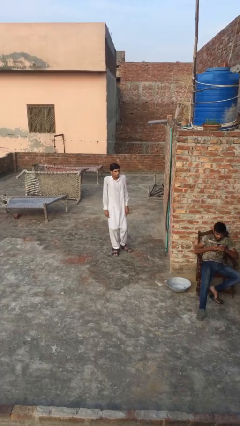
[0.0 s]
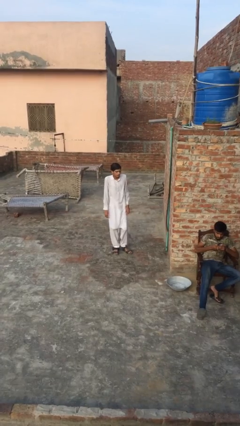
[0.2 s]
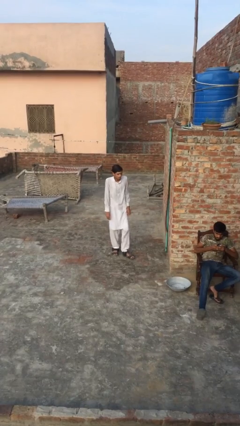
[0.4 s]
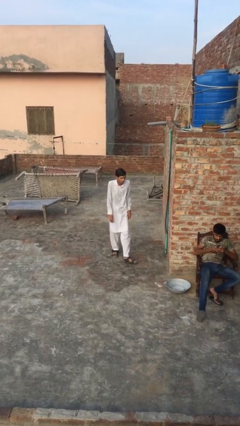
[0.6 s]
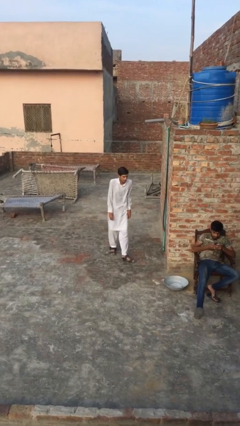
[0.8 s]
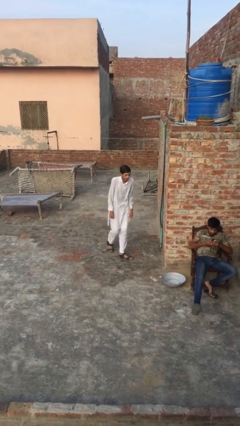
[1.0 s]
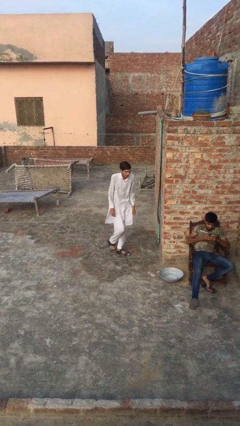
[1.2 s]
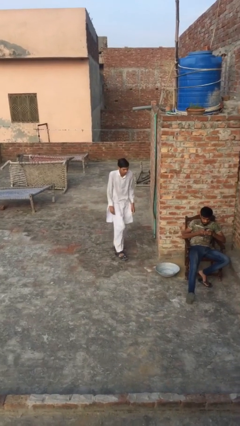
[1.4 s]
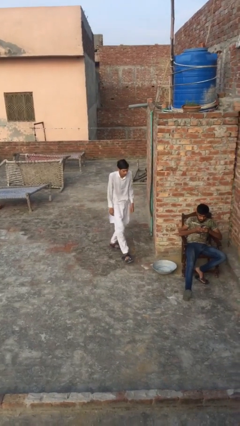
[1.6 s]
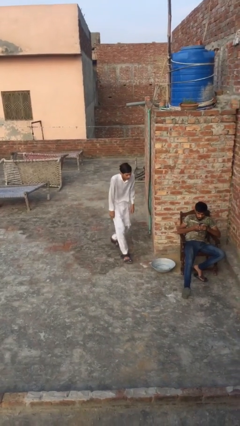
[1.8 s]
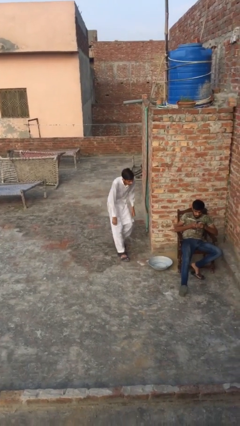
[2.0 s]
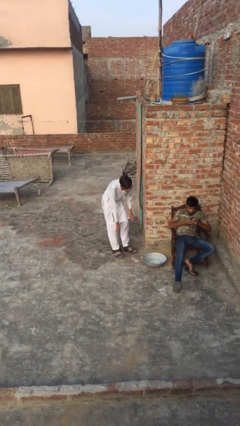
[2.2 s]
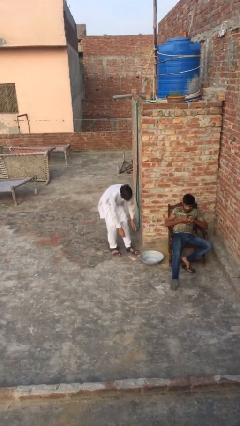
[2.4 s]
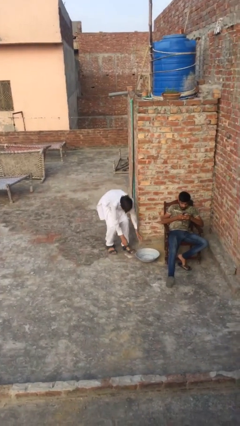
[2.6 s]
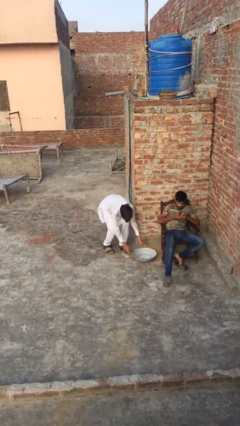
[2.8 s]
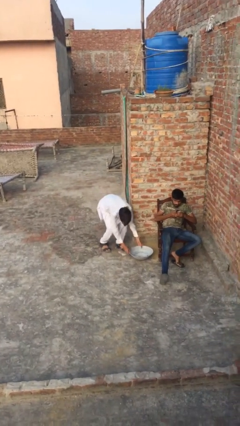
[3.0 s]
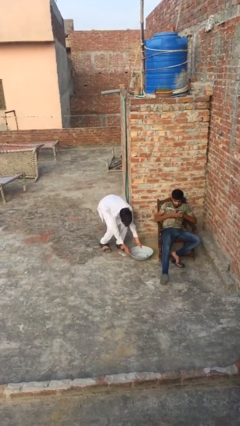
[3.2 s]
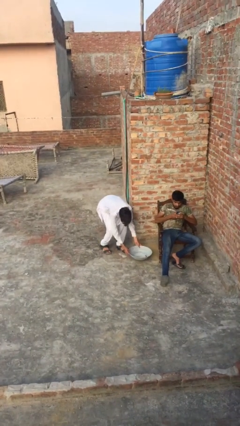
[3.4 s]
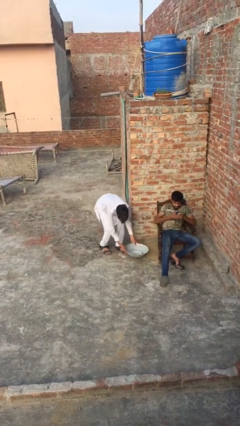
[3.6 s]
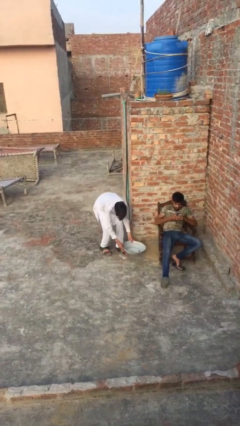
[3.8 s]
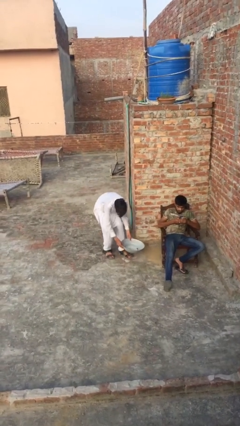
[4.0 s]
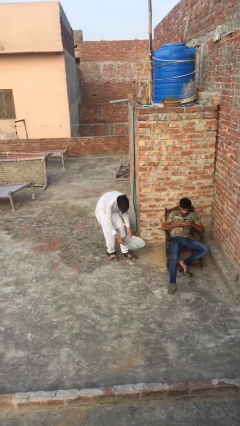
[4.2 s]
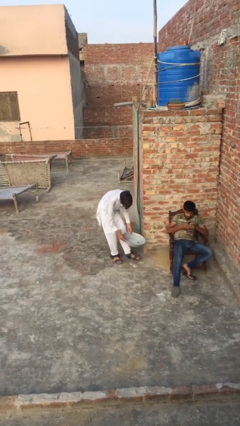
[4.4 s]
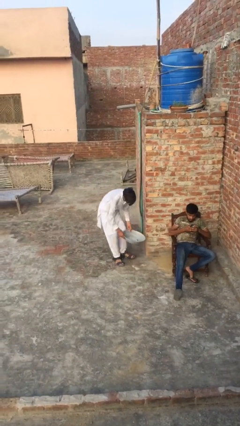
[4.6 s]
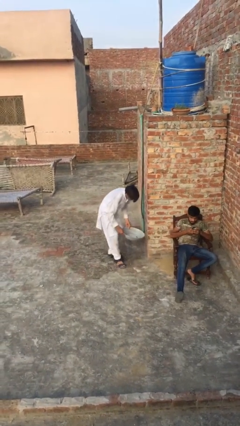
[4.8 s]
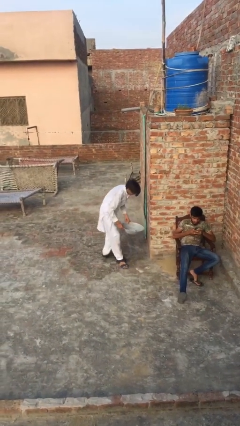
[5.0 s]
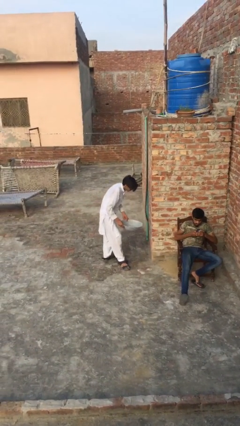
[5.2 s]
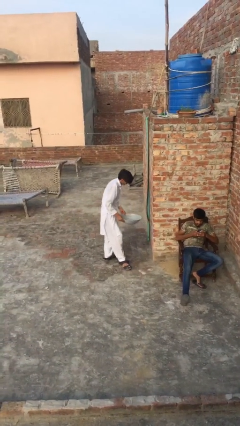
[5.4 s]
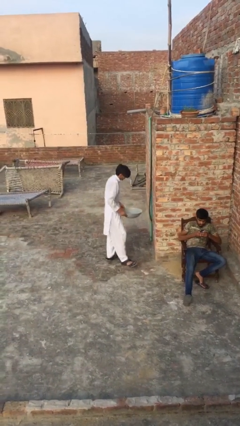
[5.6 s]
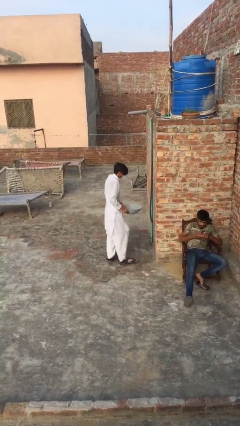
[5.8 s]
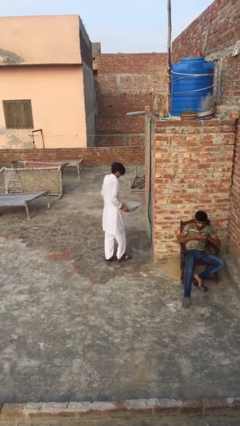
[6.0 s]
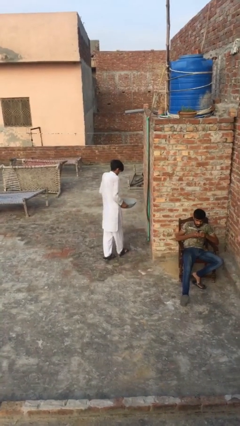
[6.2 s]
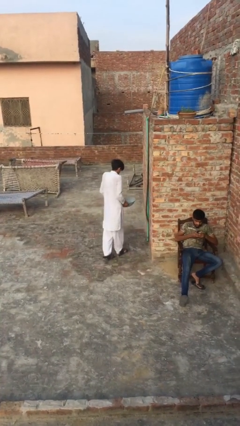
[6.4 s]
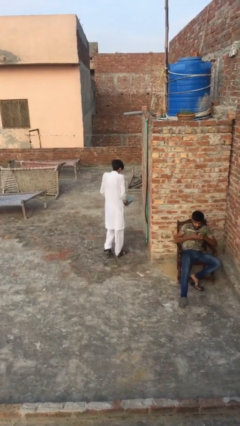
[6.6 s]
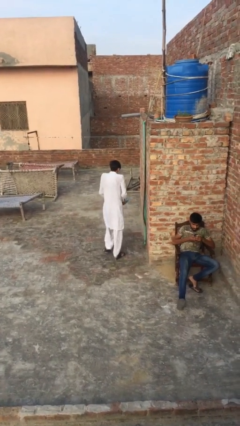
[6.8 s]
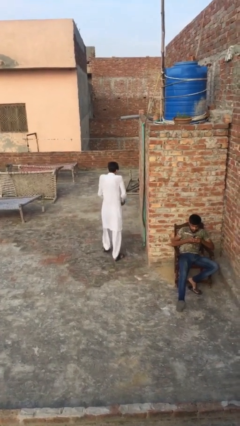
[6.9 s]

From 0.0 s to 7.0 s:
person steals object from person

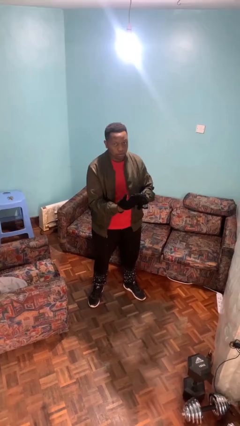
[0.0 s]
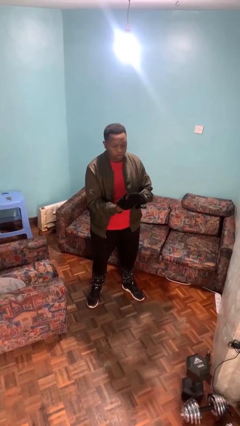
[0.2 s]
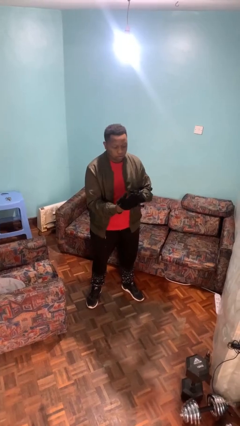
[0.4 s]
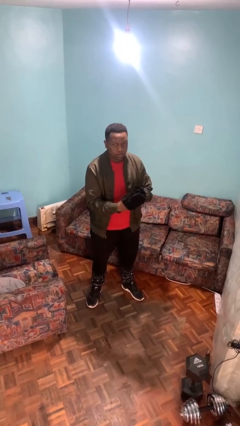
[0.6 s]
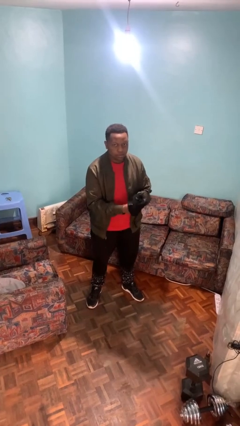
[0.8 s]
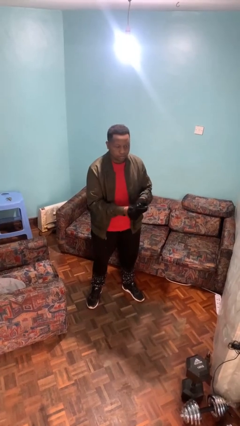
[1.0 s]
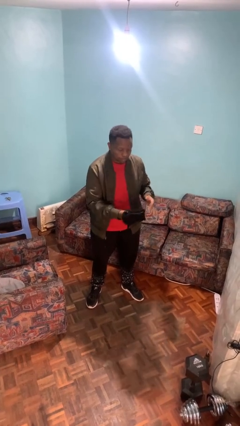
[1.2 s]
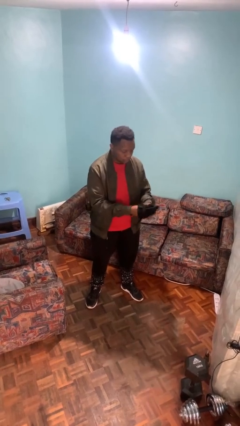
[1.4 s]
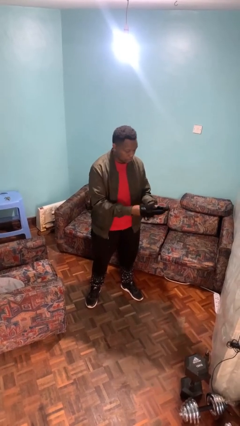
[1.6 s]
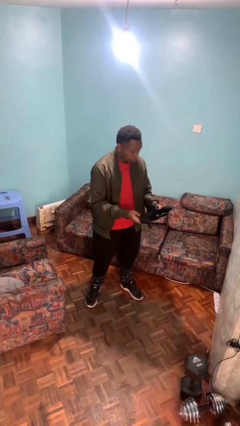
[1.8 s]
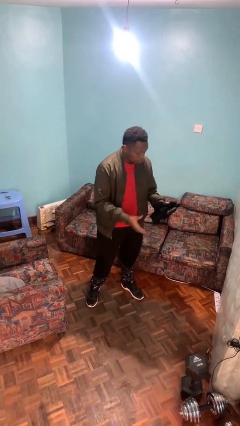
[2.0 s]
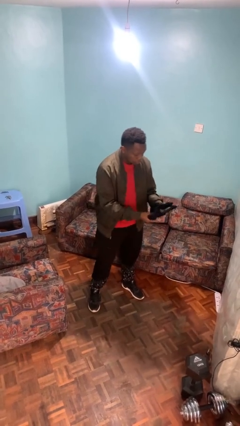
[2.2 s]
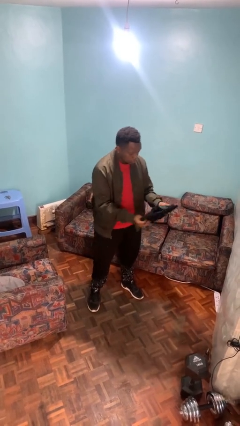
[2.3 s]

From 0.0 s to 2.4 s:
person takes off gloves

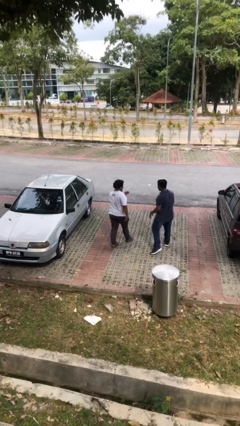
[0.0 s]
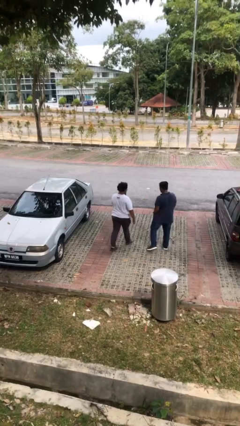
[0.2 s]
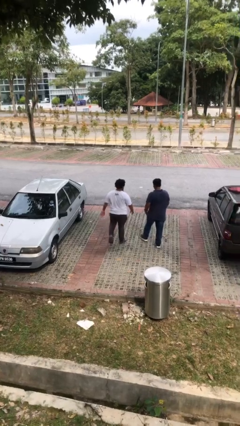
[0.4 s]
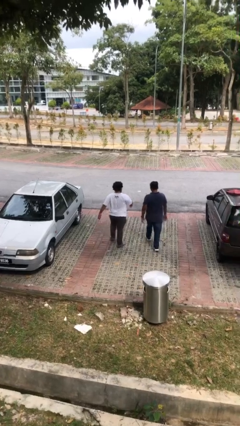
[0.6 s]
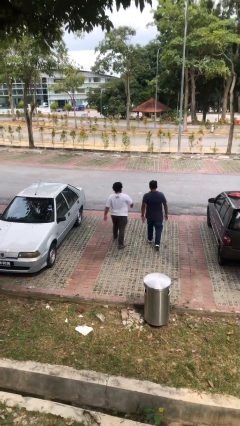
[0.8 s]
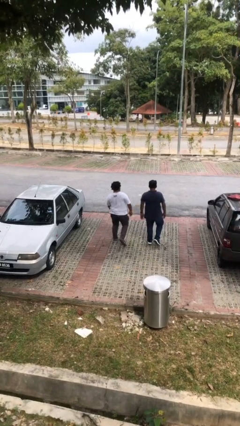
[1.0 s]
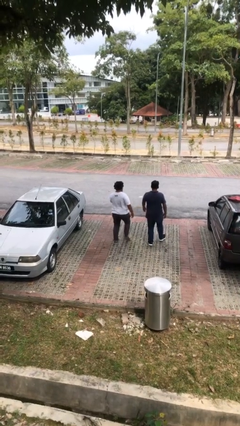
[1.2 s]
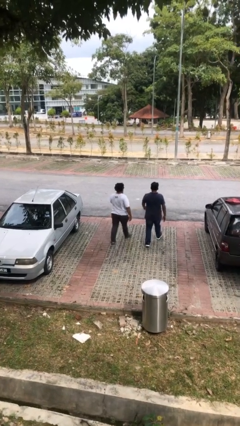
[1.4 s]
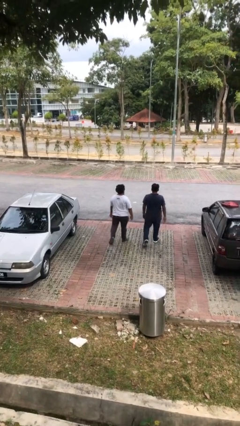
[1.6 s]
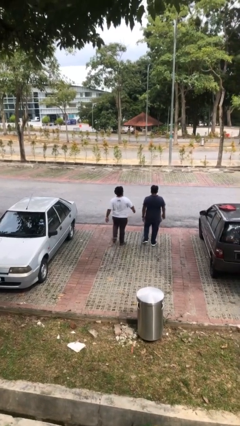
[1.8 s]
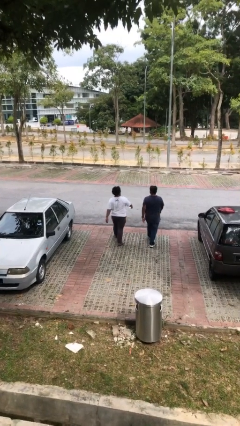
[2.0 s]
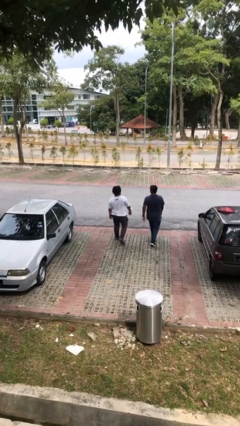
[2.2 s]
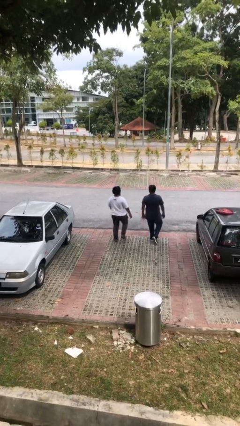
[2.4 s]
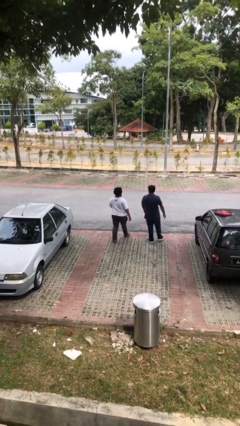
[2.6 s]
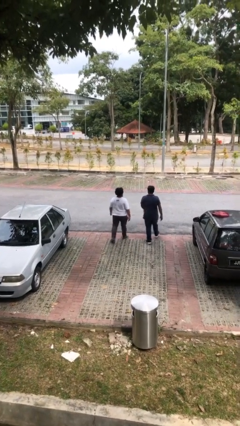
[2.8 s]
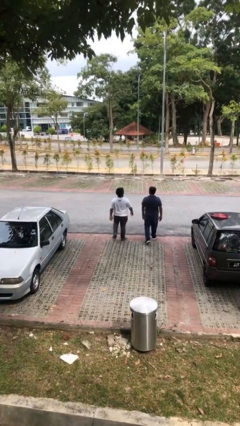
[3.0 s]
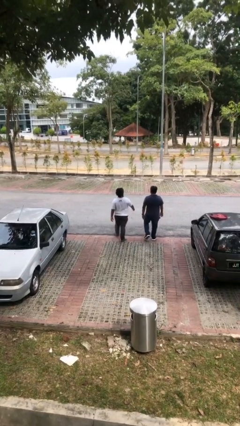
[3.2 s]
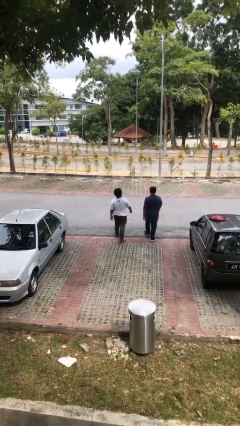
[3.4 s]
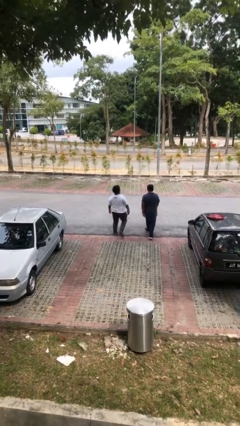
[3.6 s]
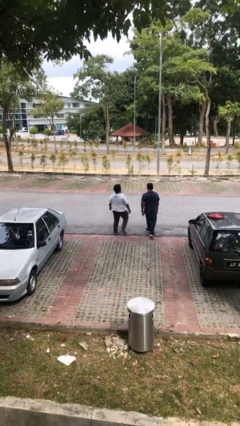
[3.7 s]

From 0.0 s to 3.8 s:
person talks to person

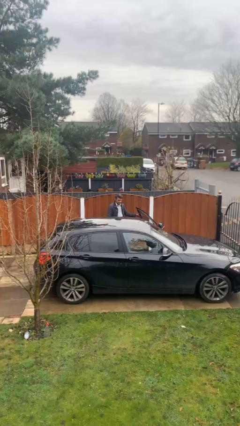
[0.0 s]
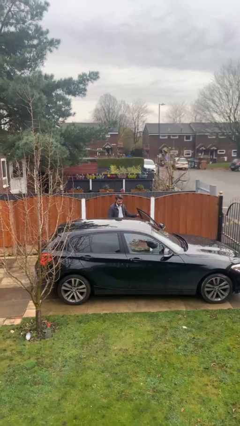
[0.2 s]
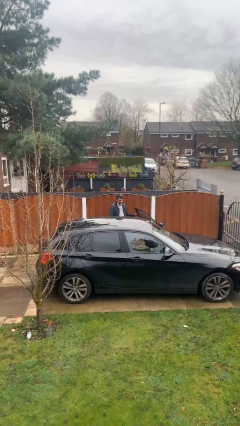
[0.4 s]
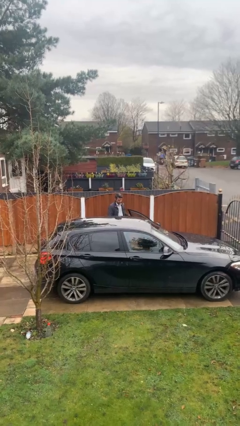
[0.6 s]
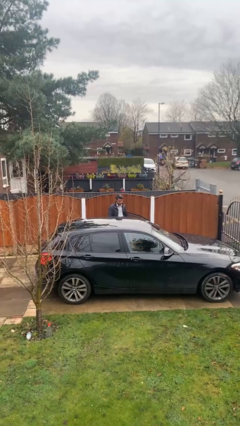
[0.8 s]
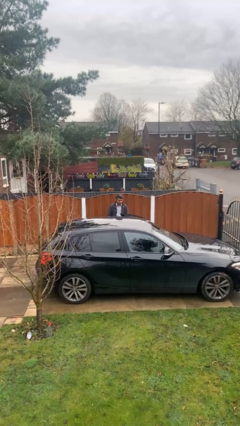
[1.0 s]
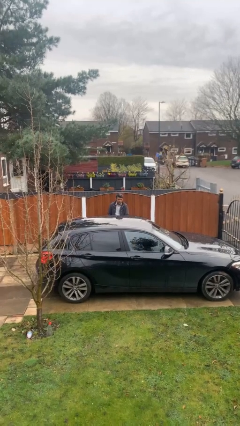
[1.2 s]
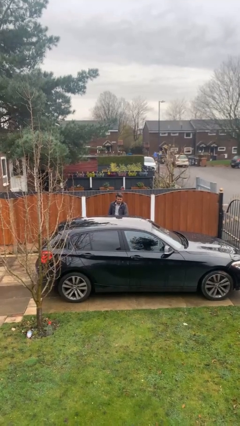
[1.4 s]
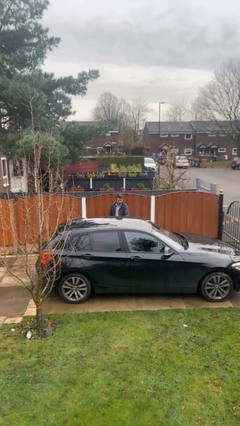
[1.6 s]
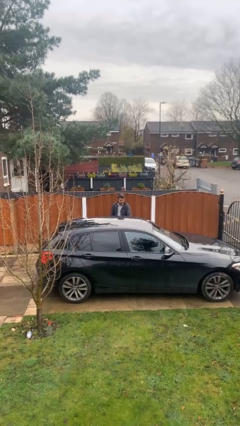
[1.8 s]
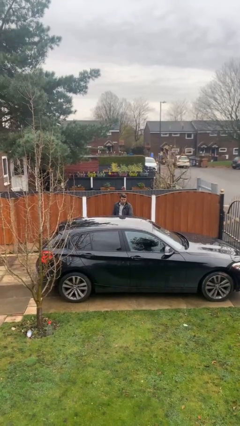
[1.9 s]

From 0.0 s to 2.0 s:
person closes car door

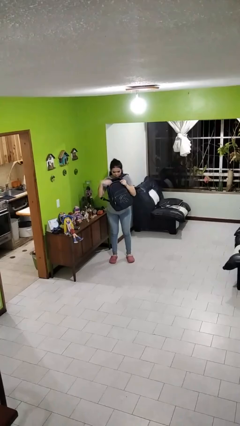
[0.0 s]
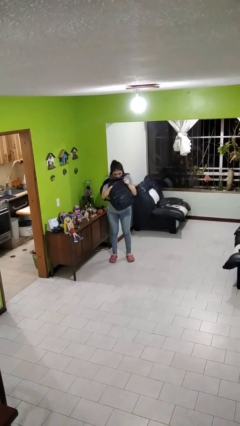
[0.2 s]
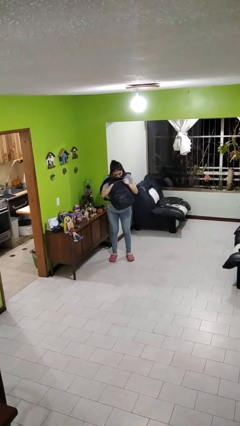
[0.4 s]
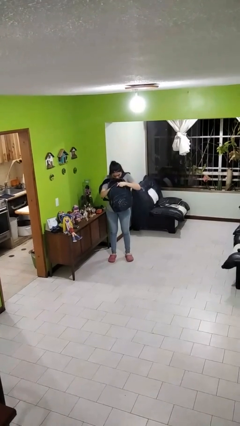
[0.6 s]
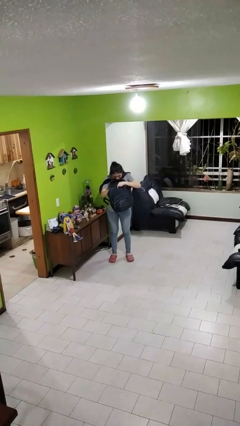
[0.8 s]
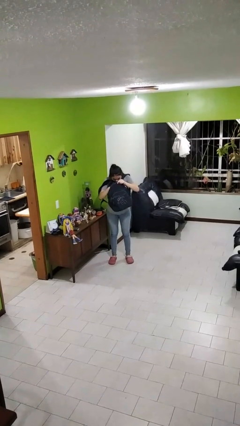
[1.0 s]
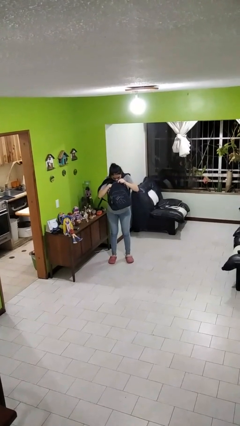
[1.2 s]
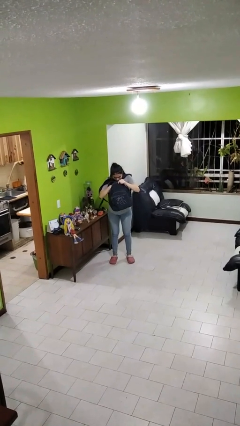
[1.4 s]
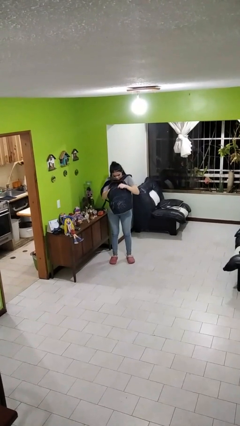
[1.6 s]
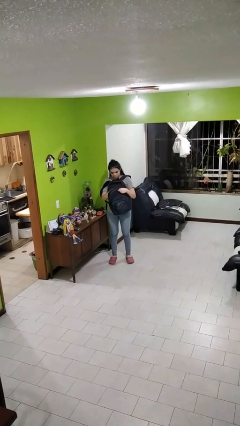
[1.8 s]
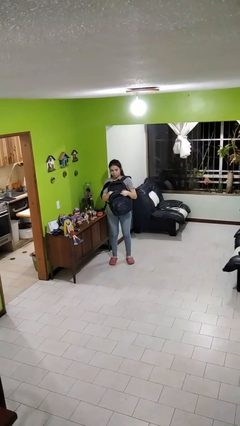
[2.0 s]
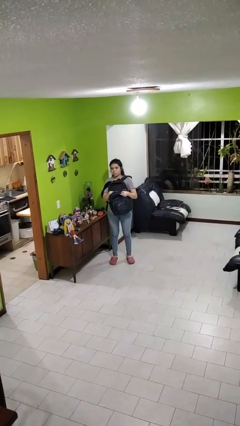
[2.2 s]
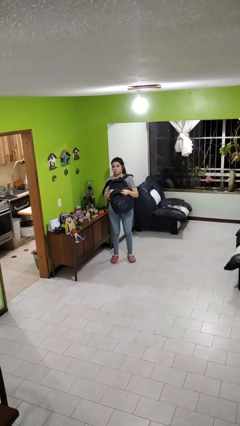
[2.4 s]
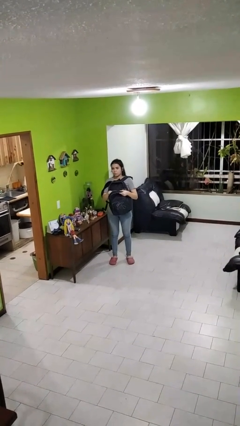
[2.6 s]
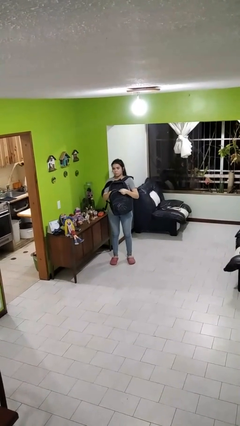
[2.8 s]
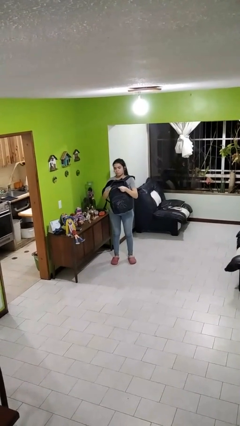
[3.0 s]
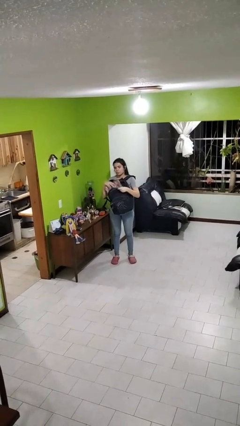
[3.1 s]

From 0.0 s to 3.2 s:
person searches in backpack
